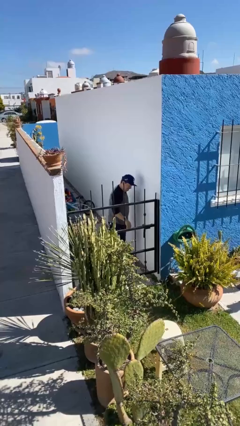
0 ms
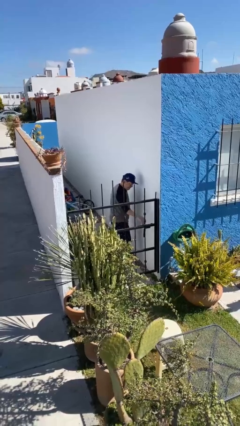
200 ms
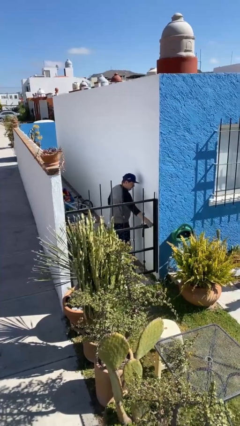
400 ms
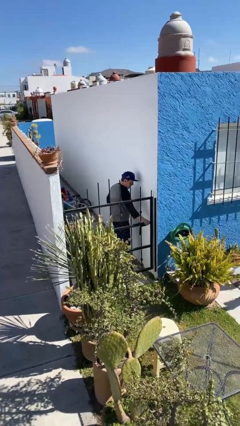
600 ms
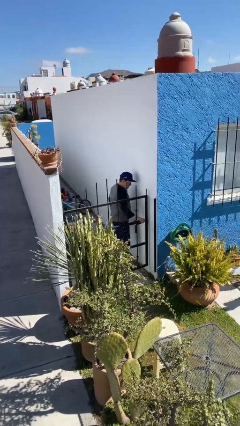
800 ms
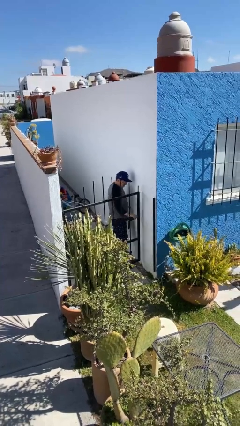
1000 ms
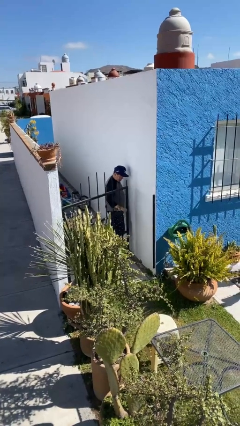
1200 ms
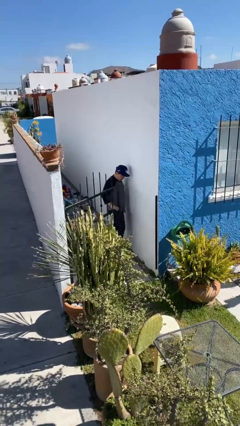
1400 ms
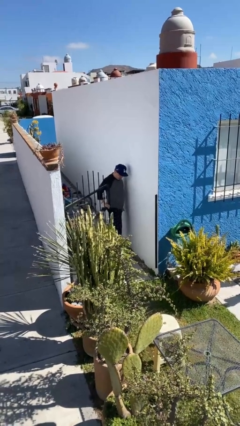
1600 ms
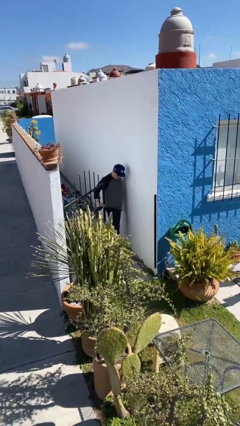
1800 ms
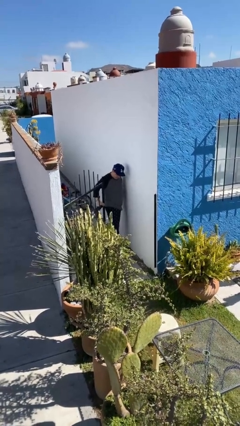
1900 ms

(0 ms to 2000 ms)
person opens facility door

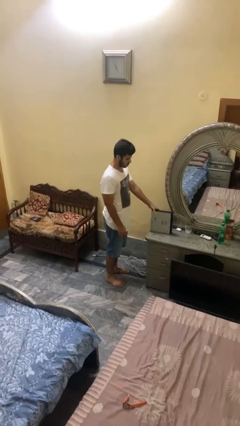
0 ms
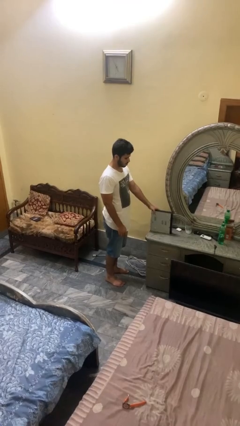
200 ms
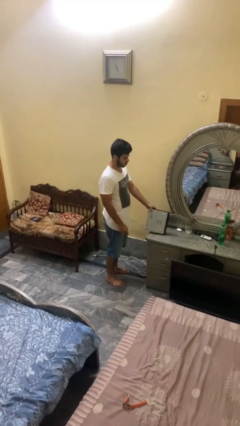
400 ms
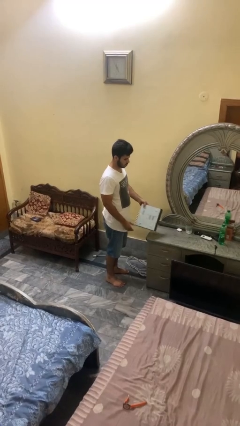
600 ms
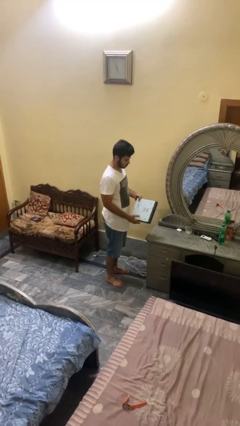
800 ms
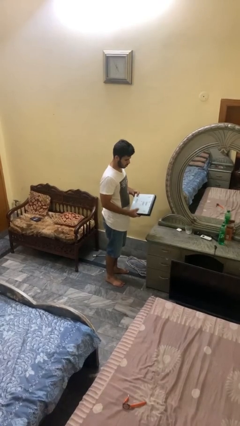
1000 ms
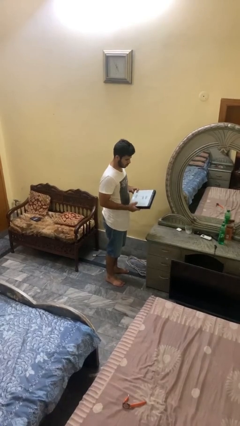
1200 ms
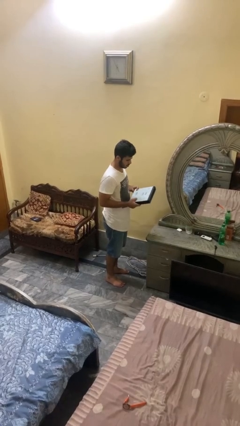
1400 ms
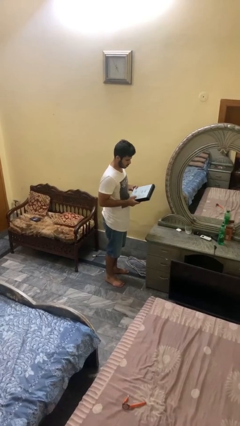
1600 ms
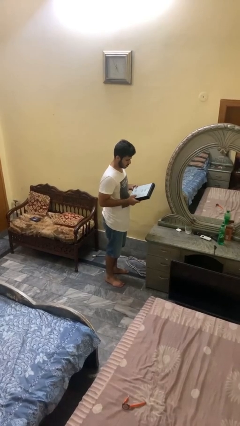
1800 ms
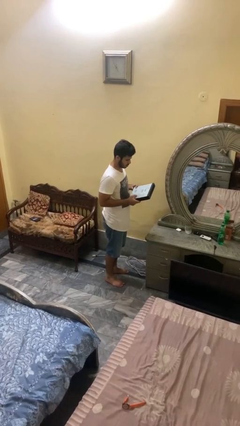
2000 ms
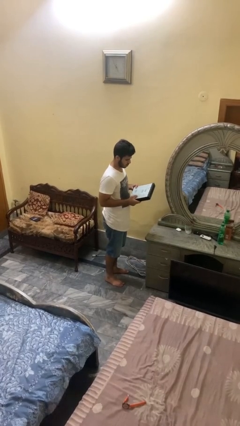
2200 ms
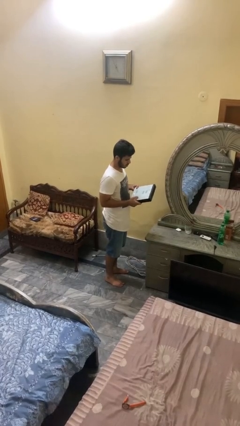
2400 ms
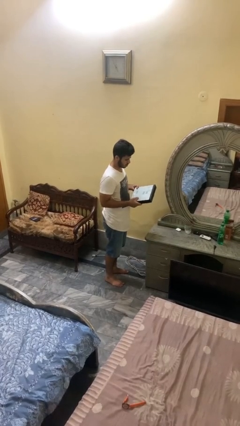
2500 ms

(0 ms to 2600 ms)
person picks up object from countertop

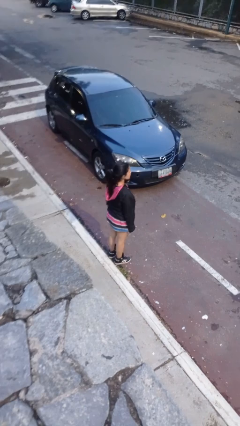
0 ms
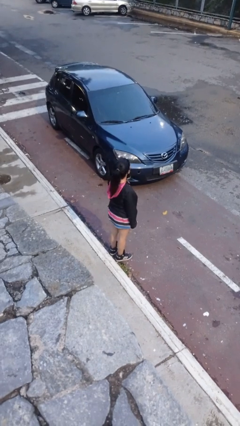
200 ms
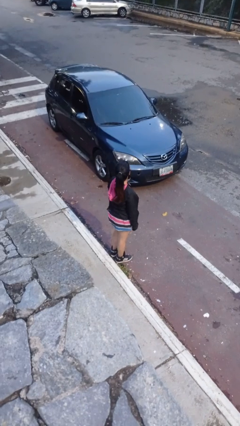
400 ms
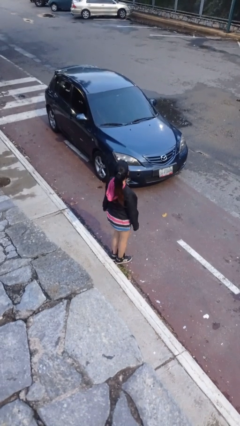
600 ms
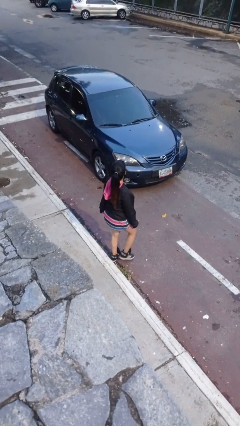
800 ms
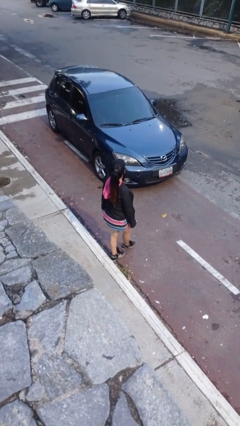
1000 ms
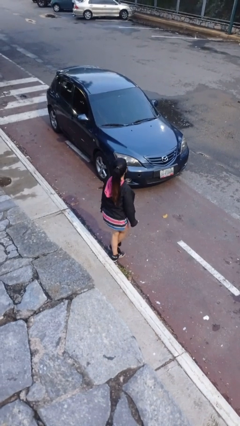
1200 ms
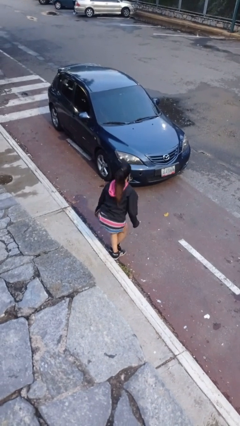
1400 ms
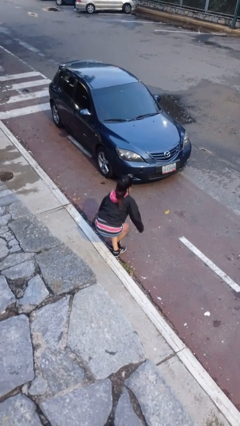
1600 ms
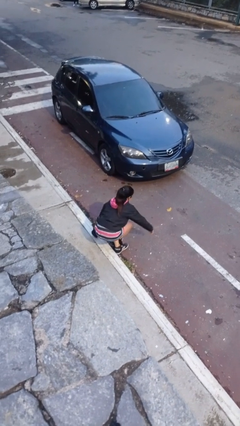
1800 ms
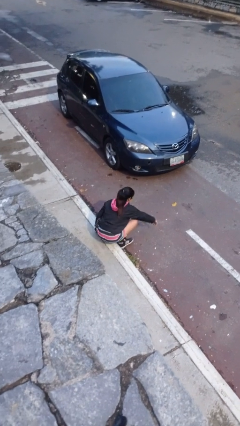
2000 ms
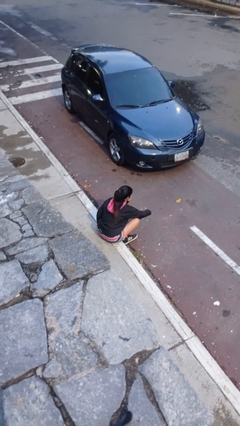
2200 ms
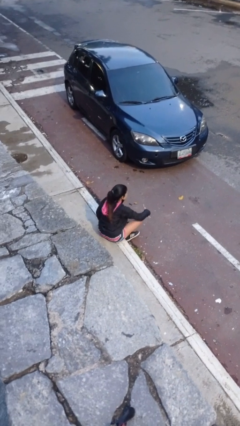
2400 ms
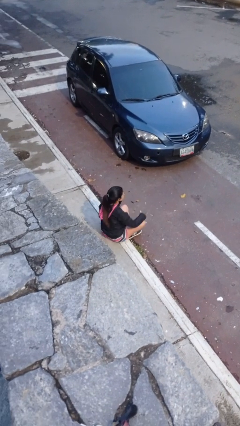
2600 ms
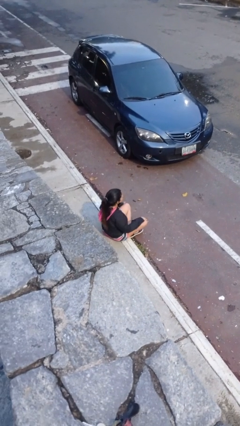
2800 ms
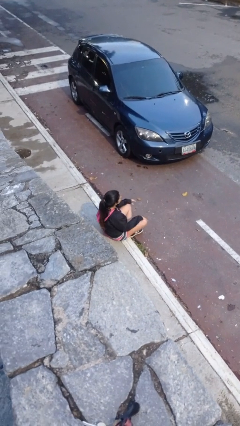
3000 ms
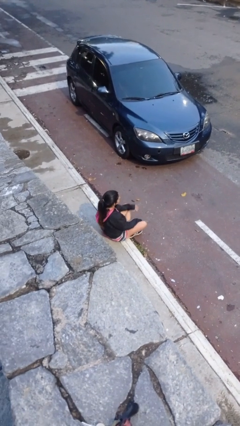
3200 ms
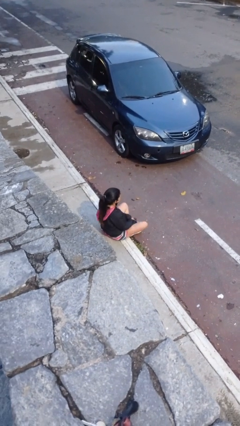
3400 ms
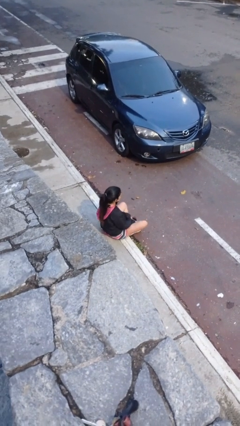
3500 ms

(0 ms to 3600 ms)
person sits crisscross

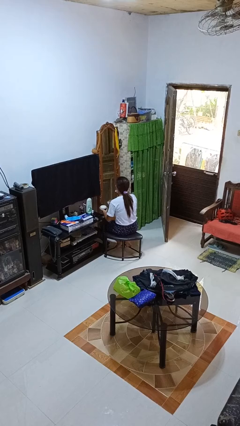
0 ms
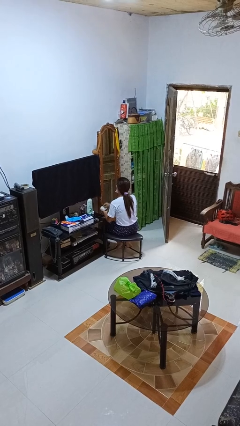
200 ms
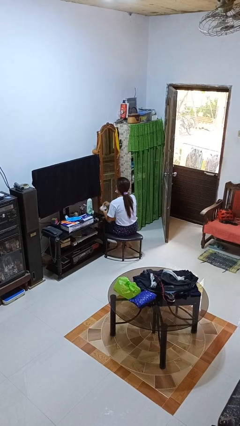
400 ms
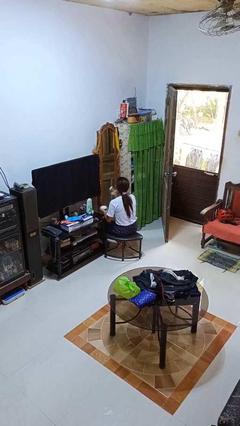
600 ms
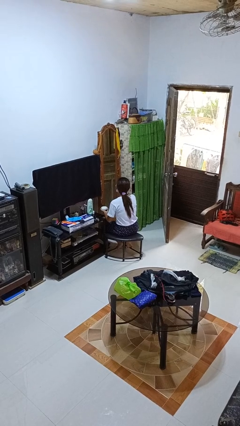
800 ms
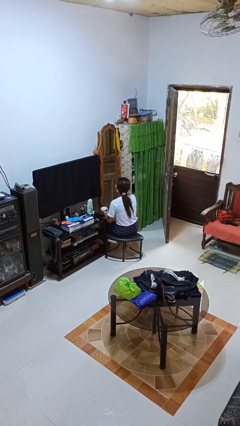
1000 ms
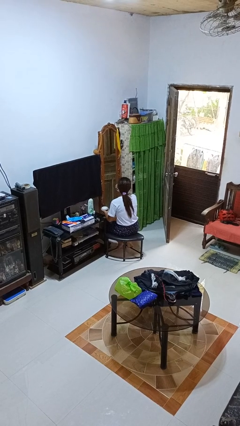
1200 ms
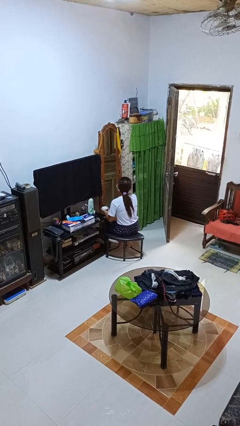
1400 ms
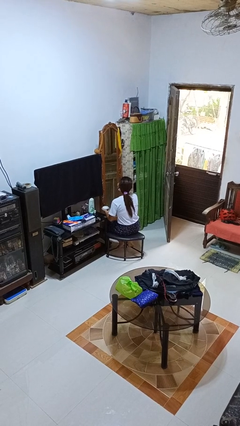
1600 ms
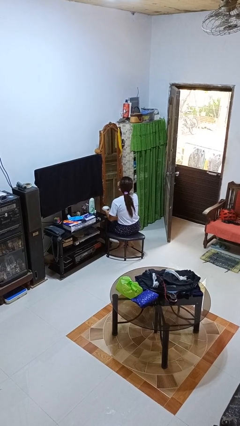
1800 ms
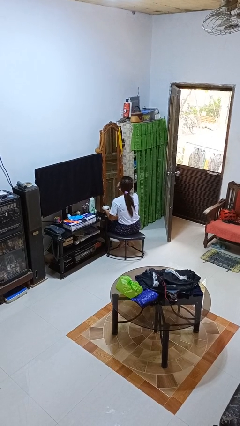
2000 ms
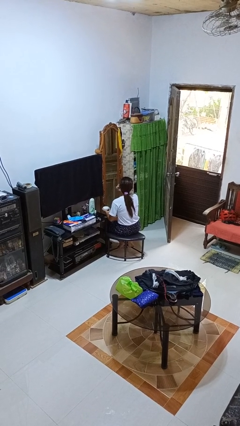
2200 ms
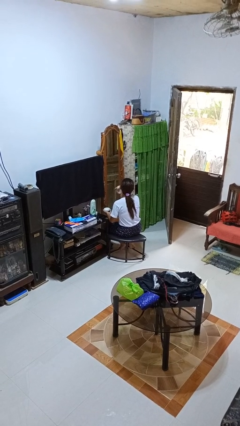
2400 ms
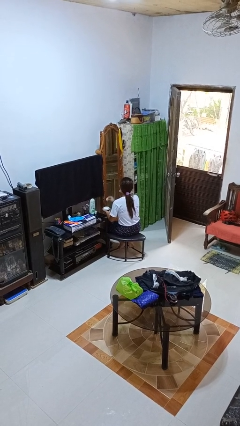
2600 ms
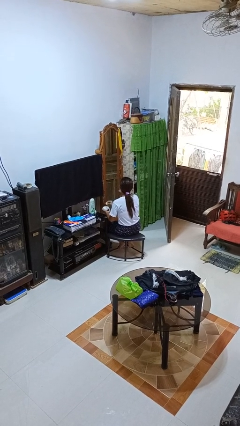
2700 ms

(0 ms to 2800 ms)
person applies foundation makeup

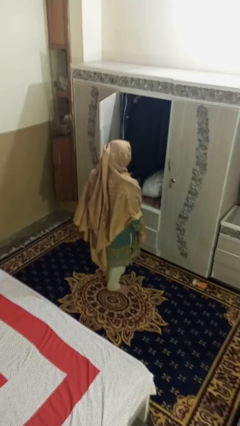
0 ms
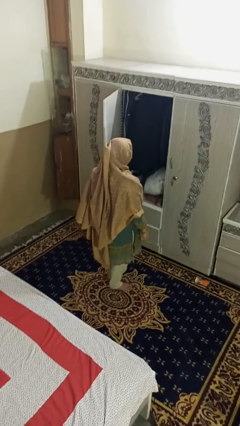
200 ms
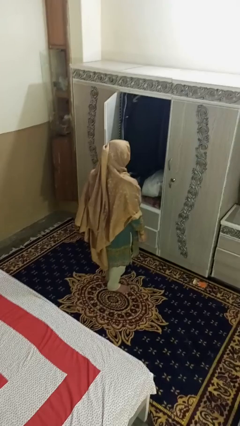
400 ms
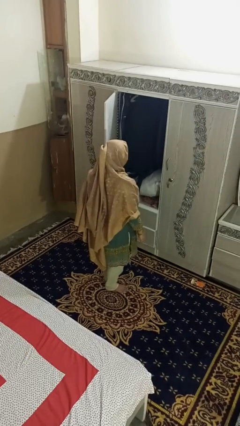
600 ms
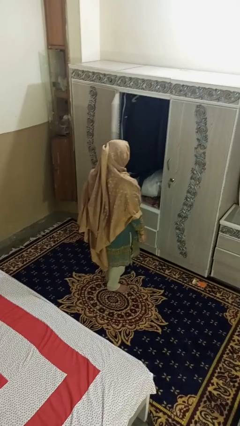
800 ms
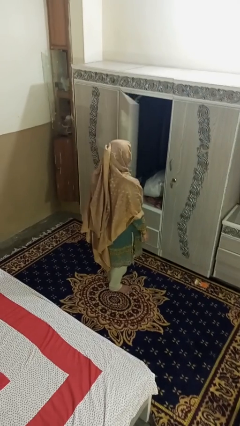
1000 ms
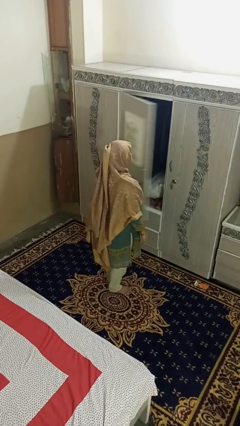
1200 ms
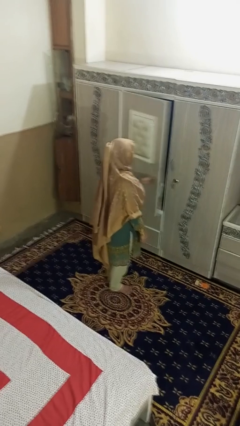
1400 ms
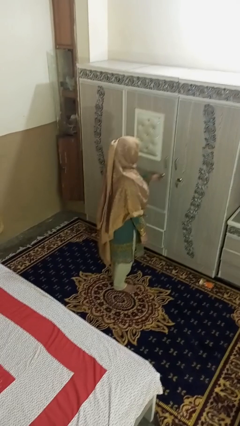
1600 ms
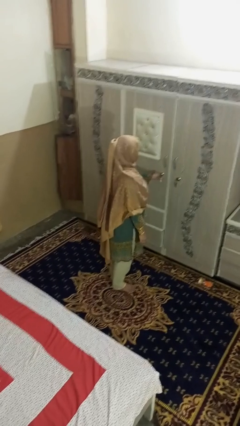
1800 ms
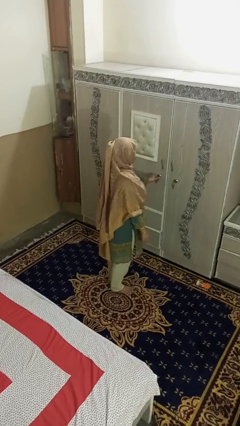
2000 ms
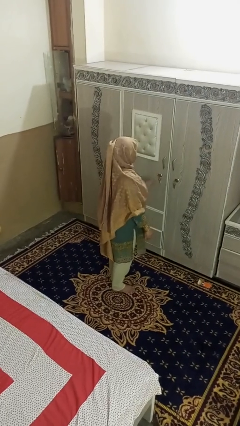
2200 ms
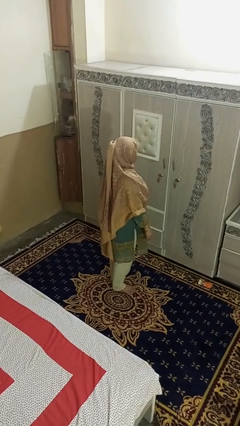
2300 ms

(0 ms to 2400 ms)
person closes dresser drawer

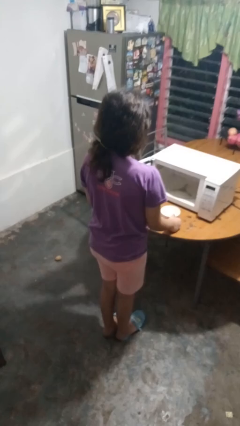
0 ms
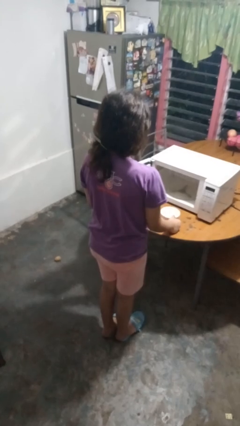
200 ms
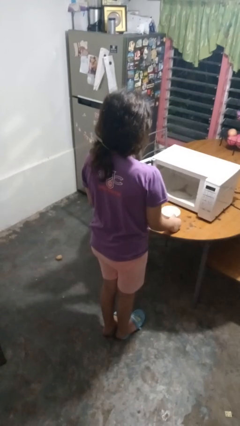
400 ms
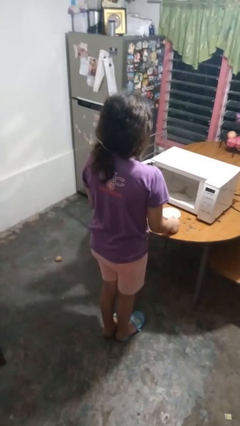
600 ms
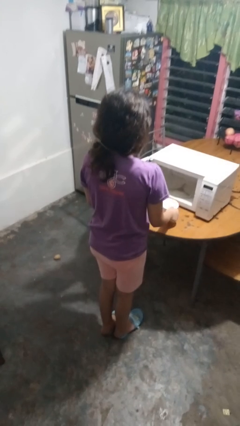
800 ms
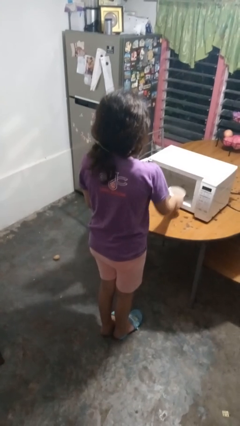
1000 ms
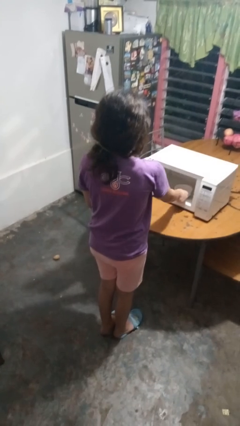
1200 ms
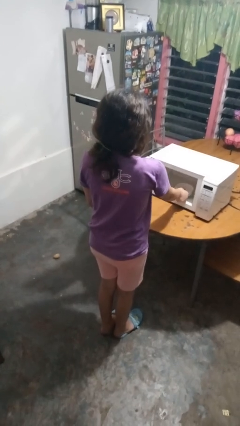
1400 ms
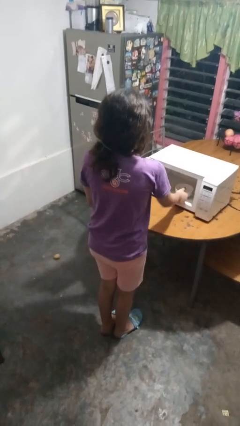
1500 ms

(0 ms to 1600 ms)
person puts object into microwave

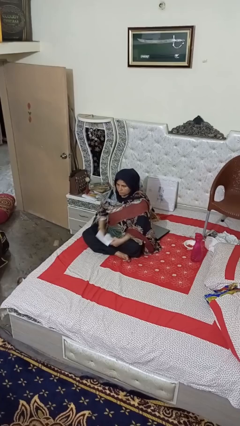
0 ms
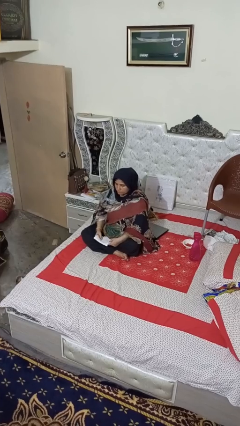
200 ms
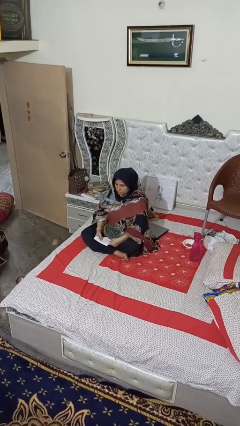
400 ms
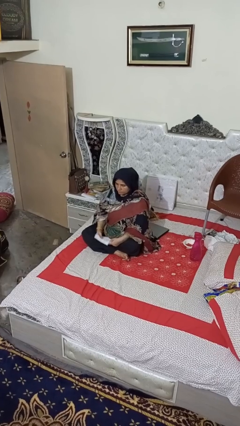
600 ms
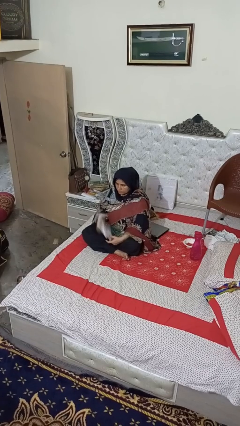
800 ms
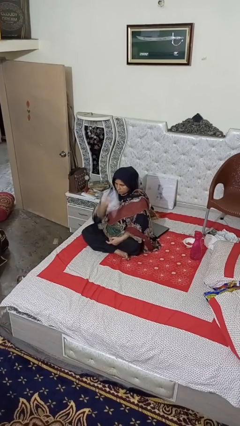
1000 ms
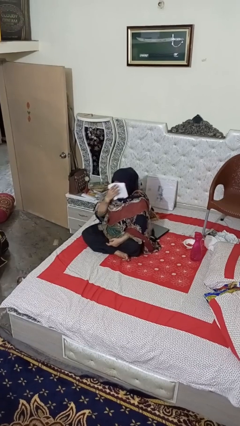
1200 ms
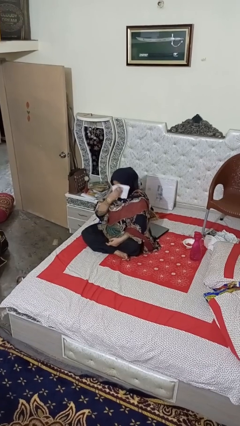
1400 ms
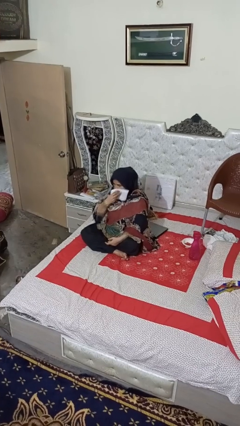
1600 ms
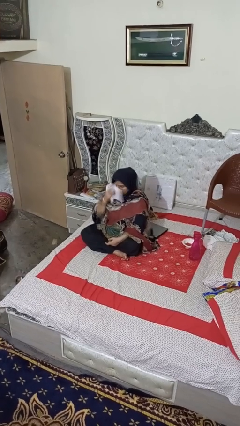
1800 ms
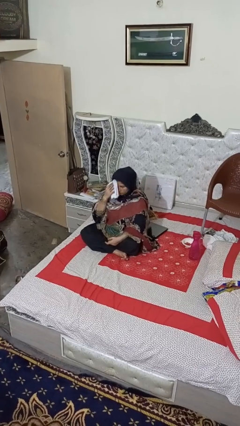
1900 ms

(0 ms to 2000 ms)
person wipes mouth with napkin
